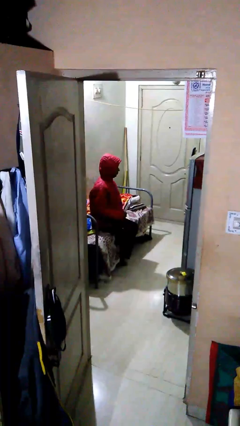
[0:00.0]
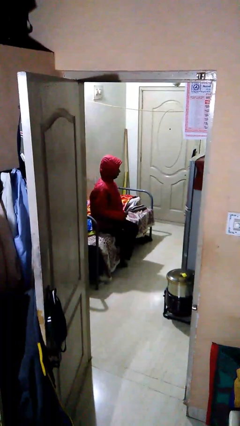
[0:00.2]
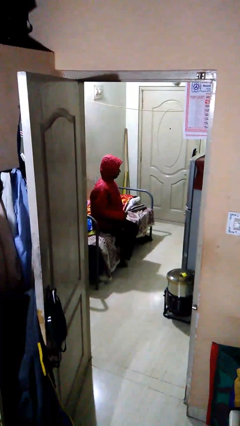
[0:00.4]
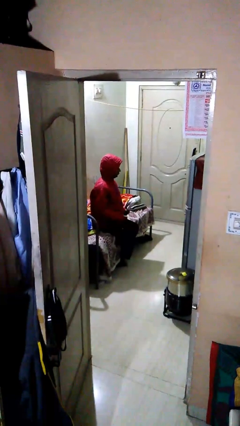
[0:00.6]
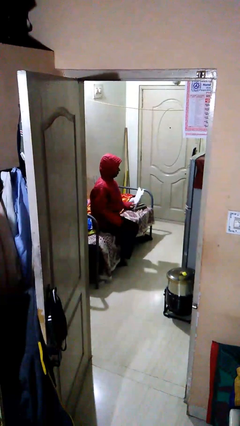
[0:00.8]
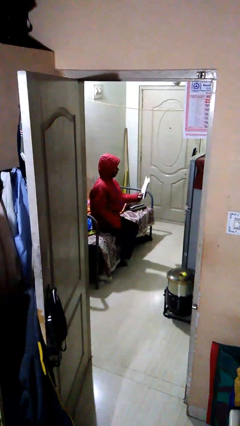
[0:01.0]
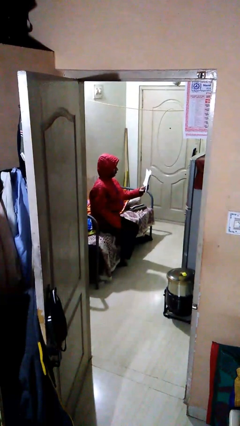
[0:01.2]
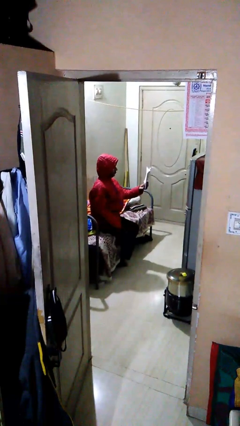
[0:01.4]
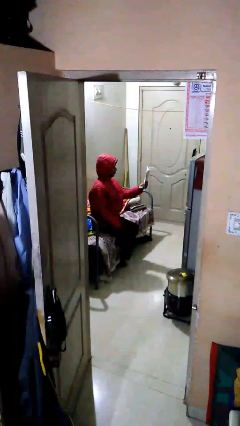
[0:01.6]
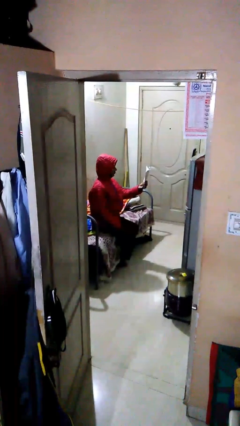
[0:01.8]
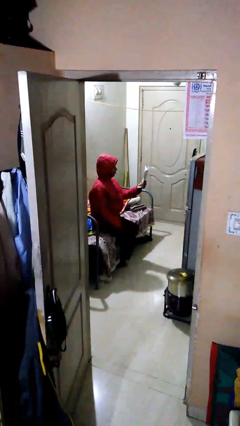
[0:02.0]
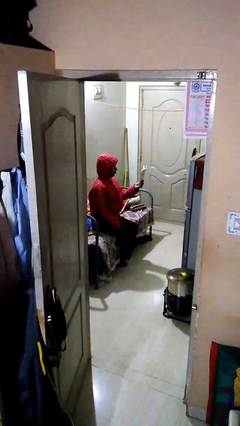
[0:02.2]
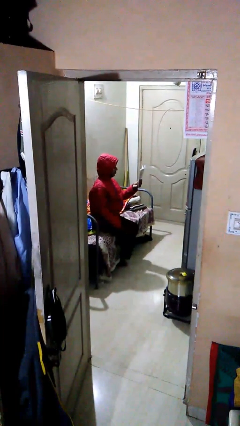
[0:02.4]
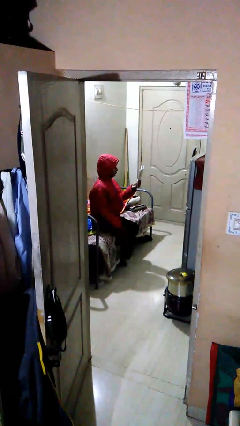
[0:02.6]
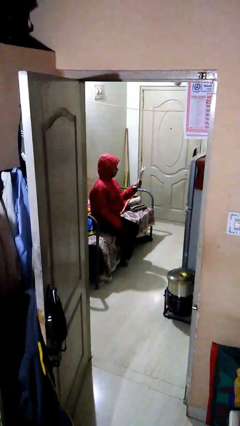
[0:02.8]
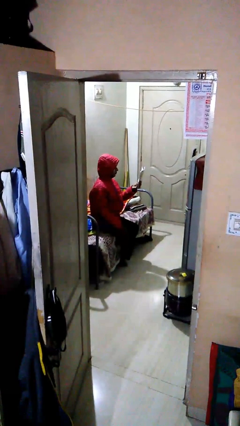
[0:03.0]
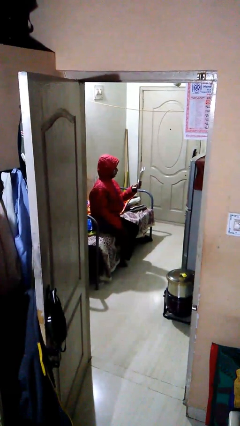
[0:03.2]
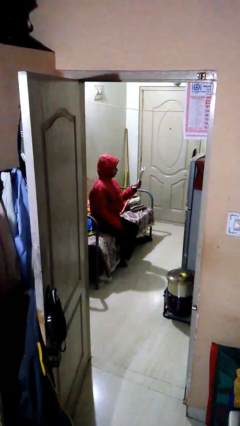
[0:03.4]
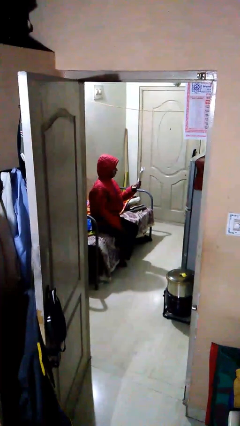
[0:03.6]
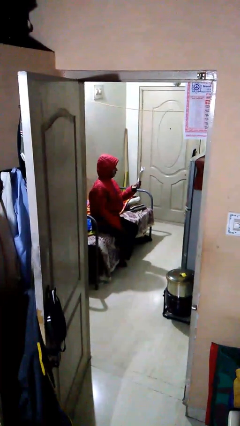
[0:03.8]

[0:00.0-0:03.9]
person reads document

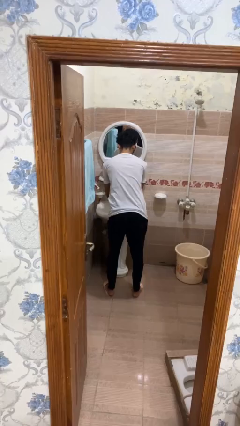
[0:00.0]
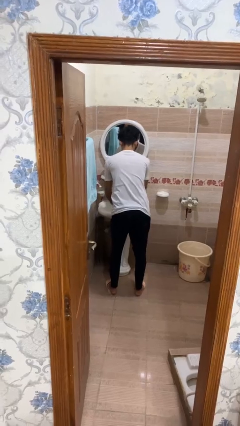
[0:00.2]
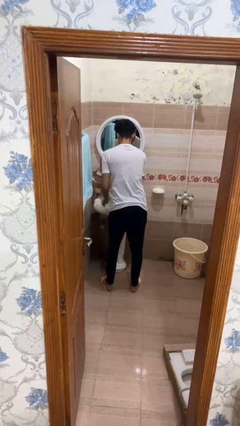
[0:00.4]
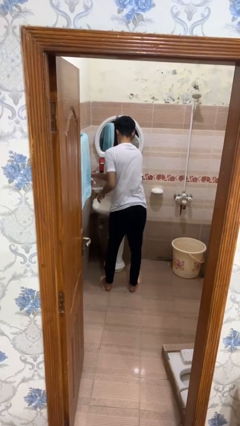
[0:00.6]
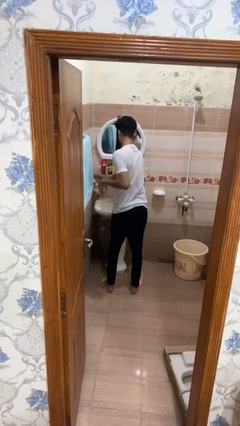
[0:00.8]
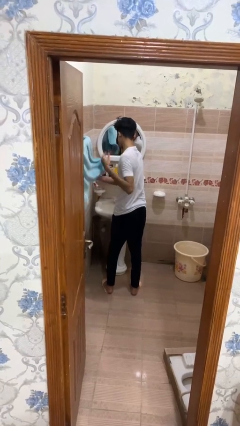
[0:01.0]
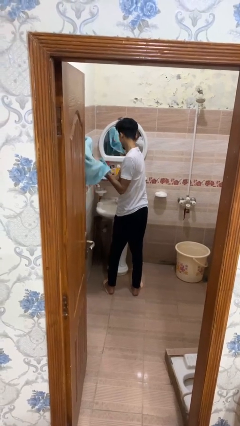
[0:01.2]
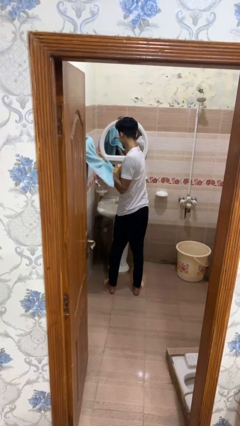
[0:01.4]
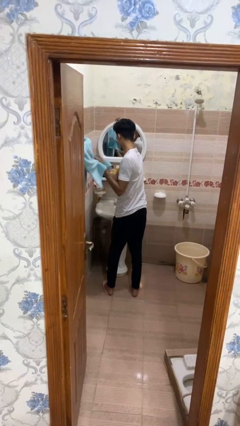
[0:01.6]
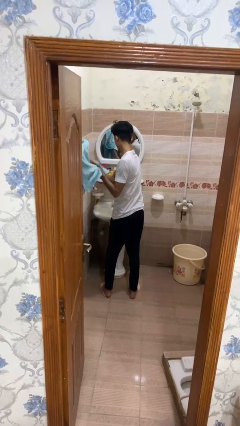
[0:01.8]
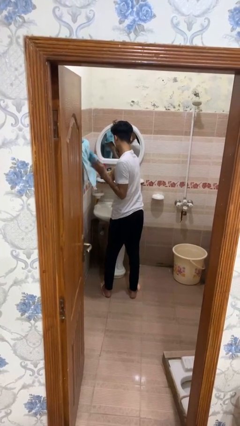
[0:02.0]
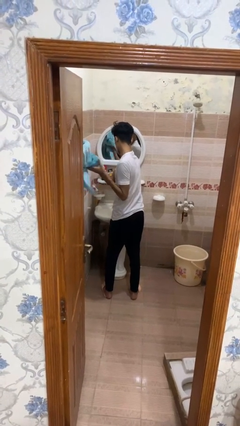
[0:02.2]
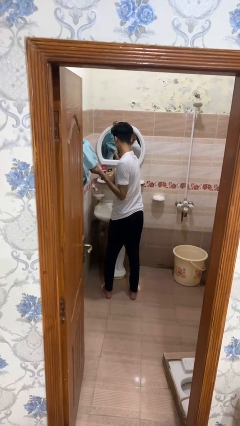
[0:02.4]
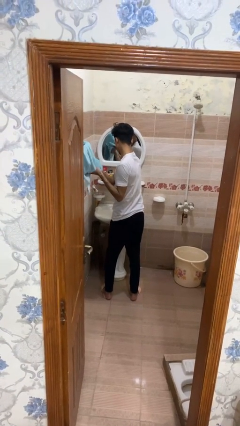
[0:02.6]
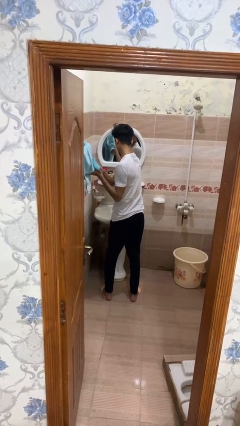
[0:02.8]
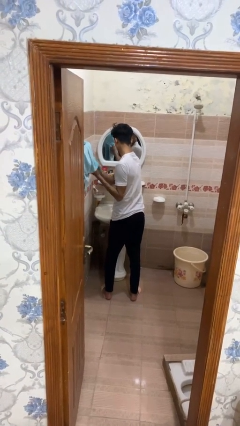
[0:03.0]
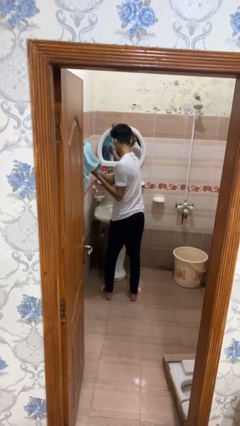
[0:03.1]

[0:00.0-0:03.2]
person dries hands with towel

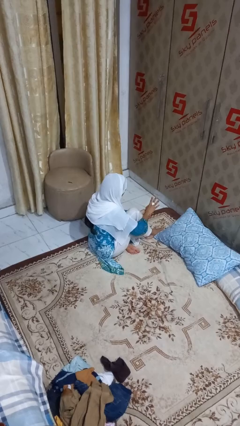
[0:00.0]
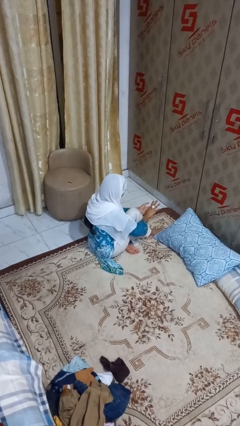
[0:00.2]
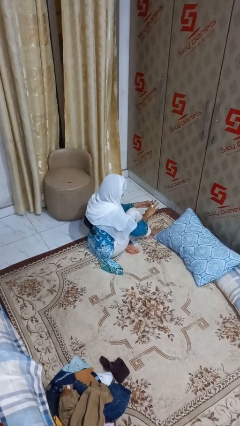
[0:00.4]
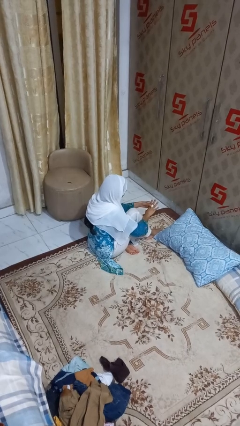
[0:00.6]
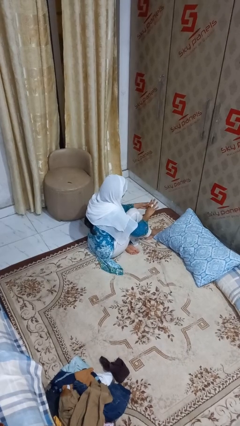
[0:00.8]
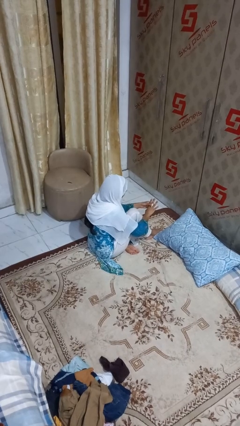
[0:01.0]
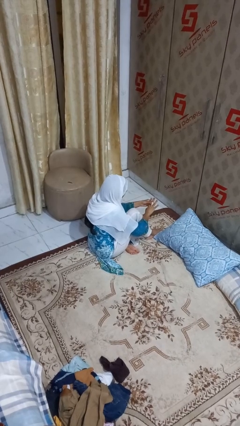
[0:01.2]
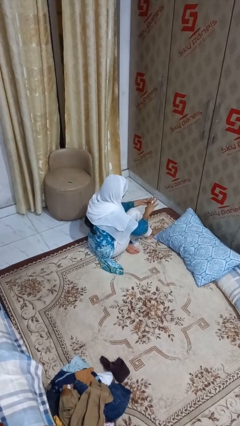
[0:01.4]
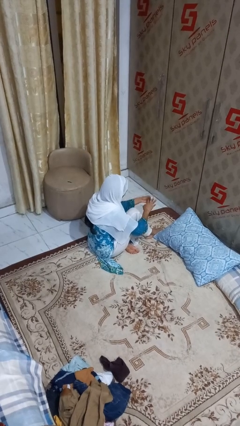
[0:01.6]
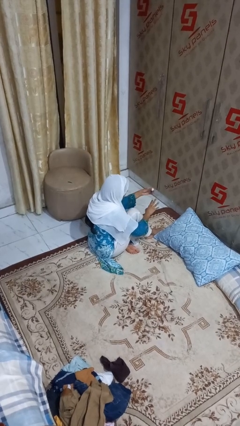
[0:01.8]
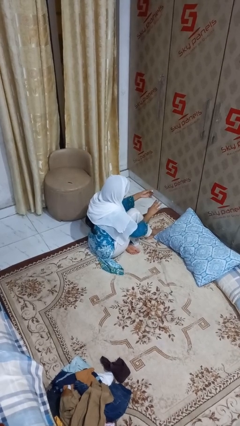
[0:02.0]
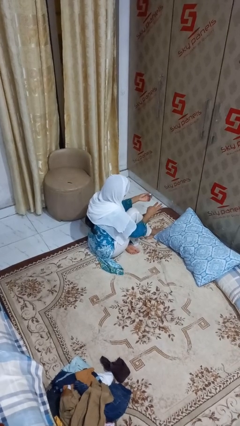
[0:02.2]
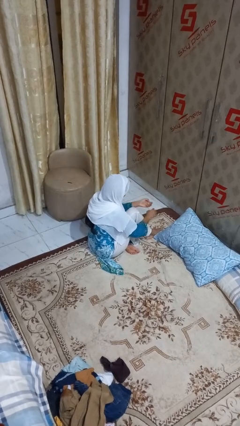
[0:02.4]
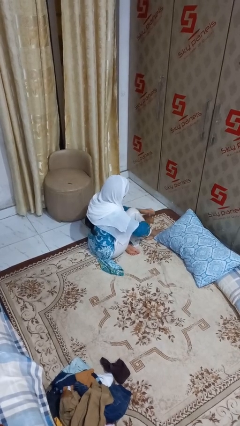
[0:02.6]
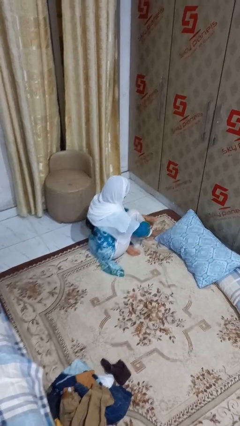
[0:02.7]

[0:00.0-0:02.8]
person takes off ring

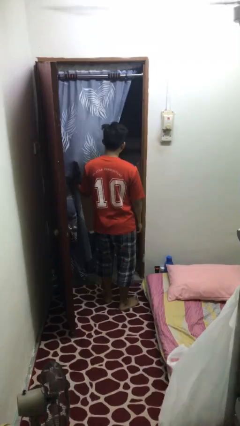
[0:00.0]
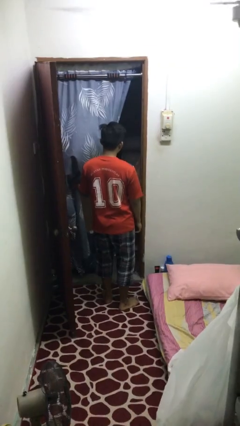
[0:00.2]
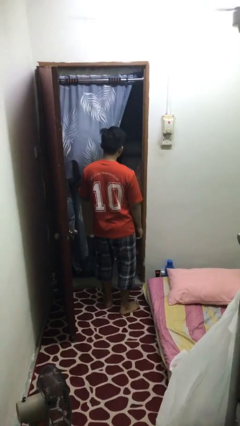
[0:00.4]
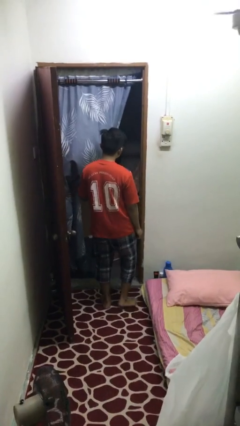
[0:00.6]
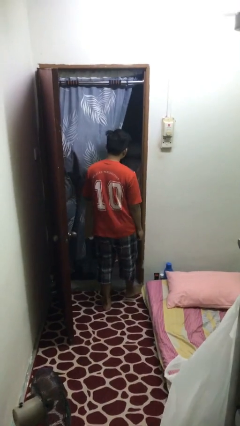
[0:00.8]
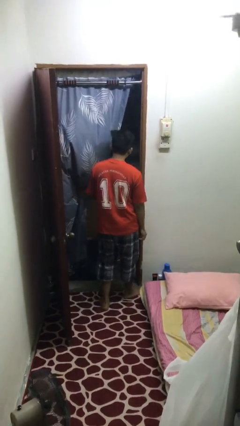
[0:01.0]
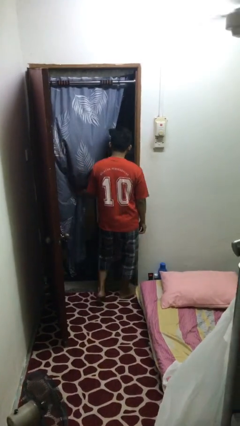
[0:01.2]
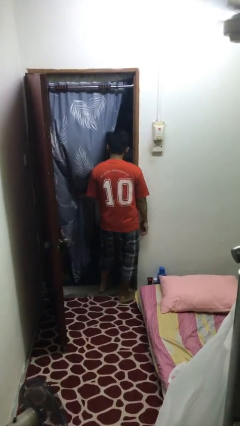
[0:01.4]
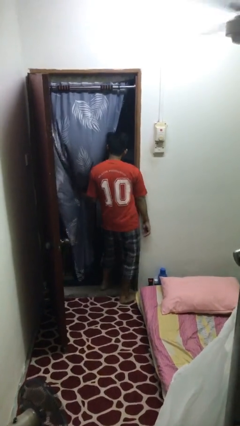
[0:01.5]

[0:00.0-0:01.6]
person bumps into wall

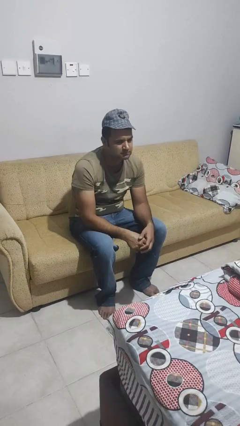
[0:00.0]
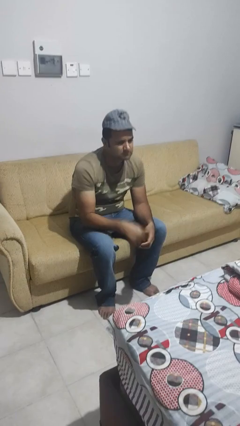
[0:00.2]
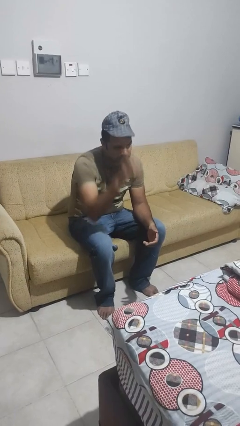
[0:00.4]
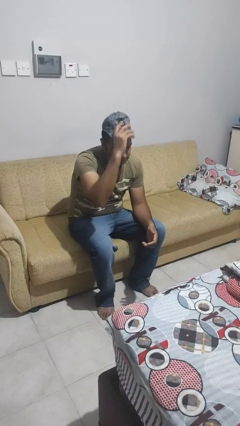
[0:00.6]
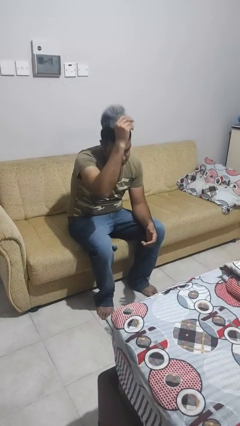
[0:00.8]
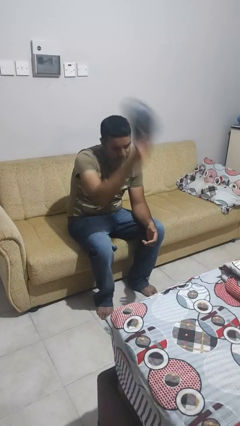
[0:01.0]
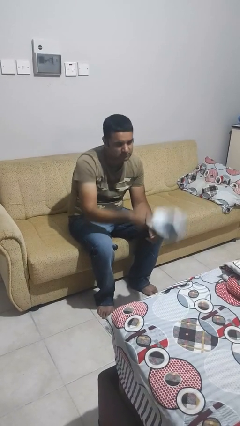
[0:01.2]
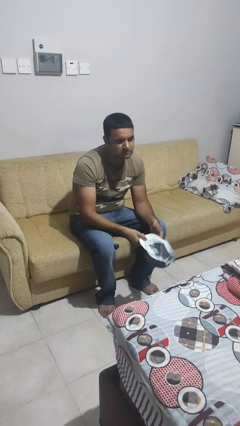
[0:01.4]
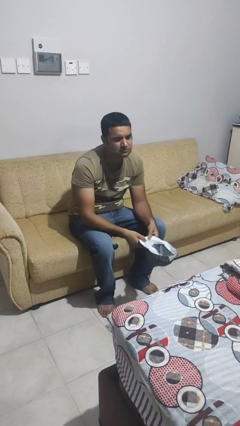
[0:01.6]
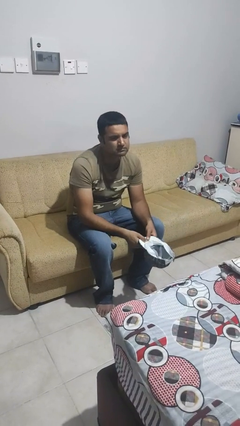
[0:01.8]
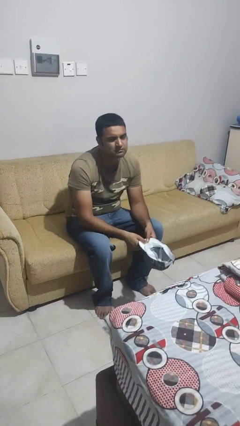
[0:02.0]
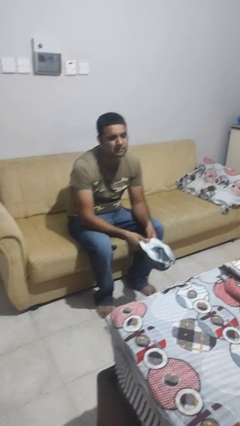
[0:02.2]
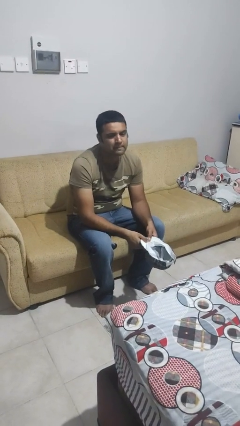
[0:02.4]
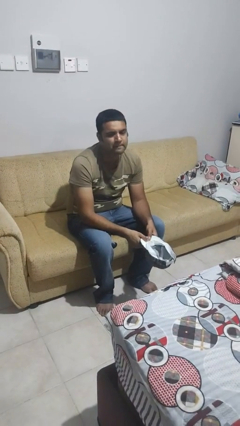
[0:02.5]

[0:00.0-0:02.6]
person takes off hat

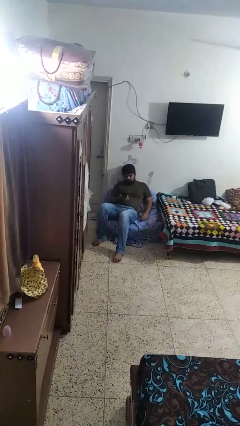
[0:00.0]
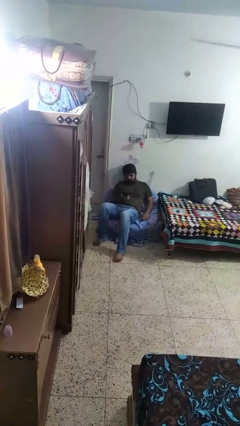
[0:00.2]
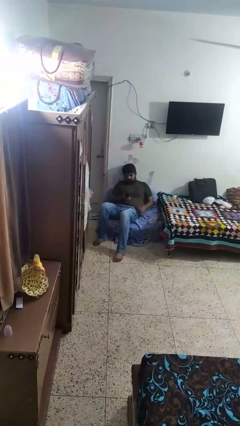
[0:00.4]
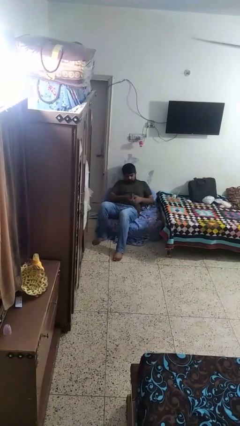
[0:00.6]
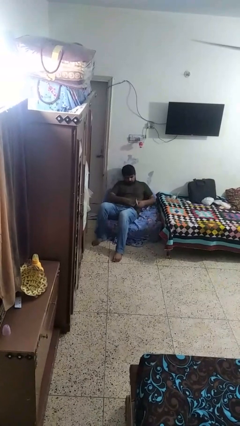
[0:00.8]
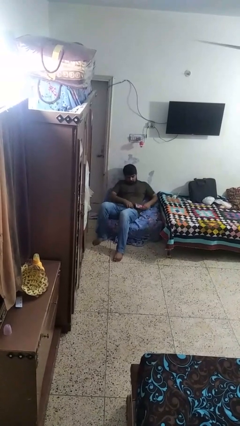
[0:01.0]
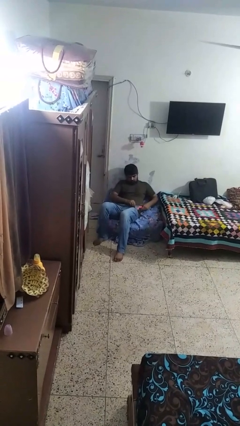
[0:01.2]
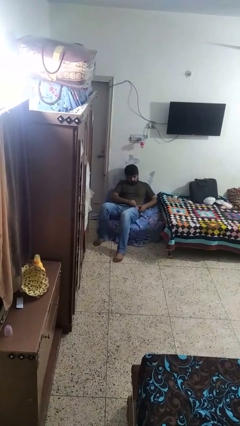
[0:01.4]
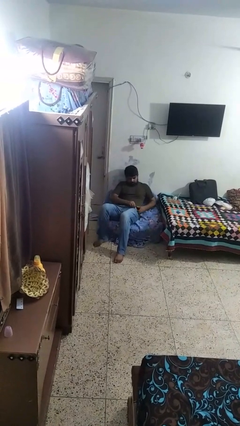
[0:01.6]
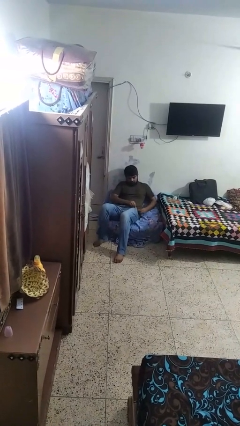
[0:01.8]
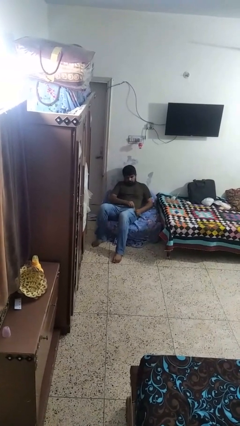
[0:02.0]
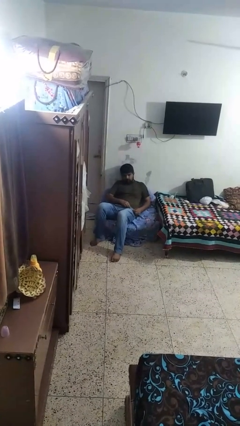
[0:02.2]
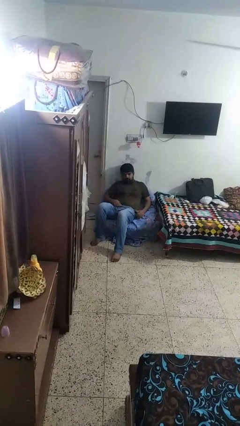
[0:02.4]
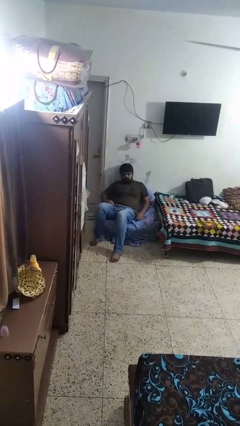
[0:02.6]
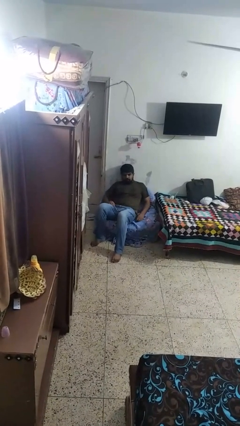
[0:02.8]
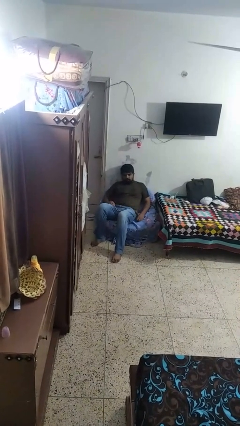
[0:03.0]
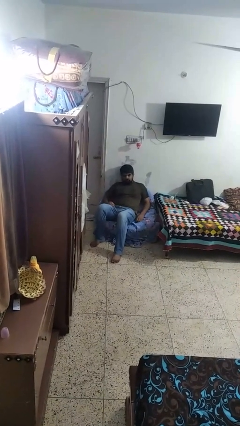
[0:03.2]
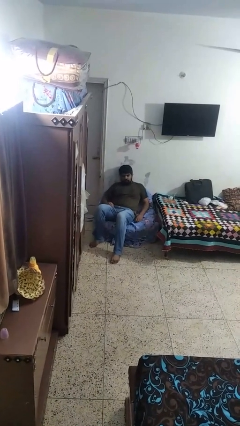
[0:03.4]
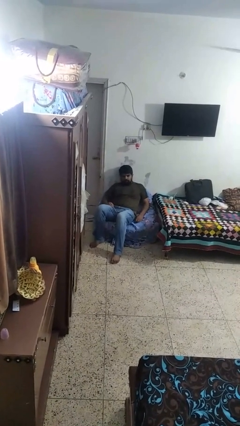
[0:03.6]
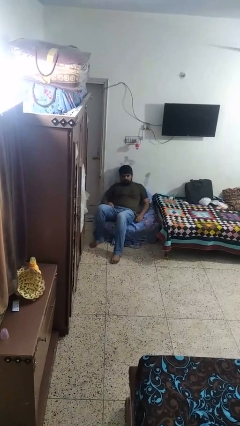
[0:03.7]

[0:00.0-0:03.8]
person puts phone into pocket
